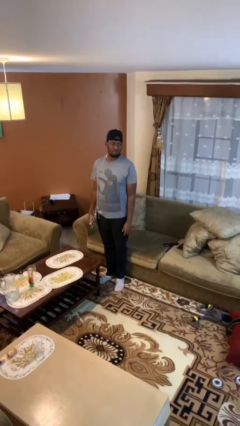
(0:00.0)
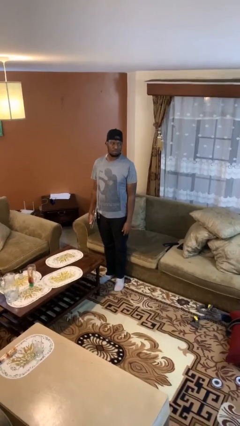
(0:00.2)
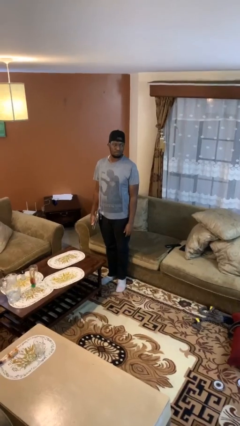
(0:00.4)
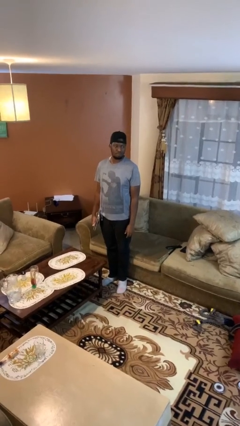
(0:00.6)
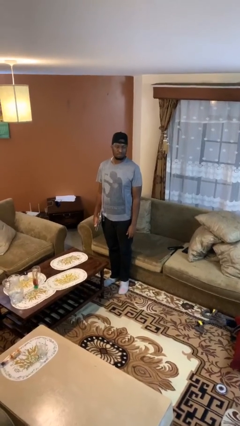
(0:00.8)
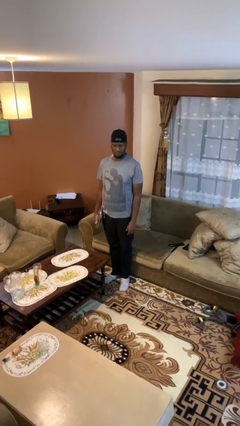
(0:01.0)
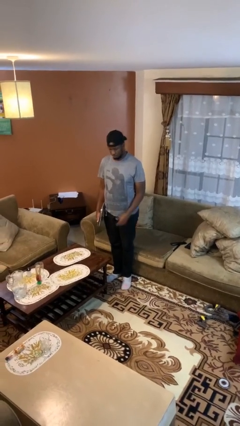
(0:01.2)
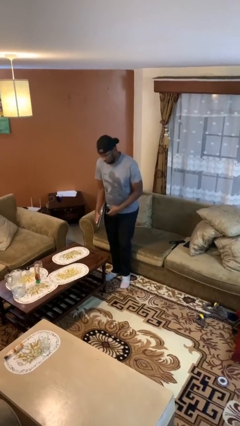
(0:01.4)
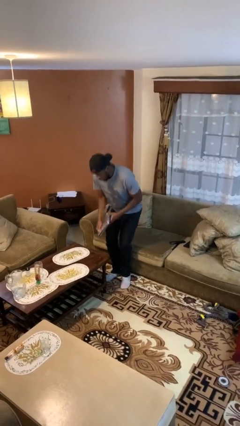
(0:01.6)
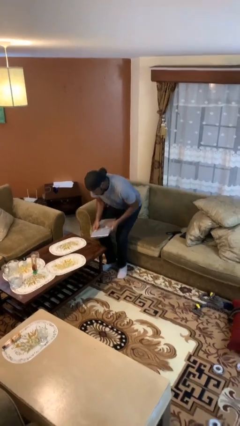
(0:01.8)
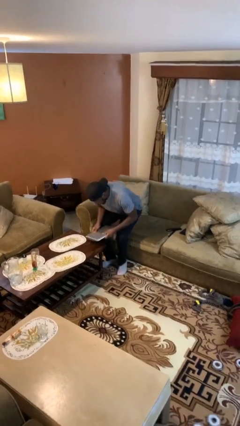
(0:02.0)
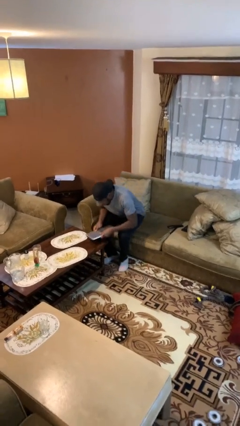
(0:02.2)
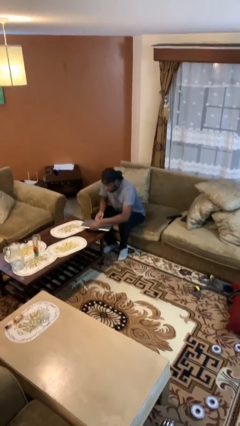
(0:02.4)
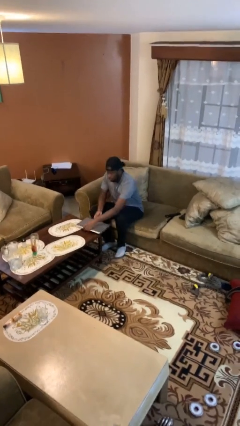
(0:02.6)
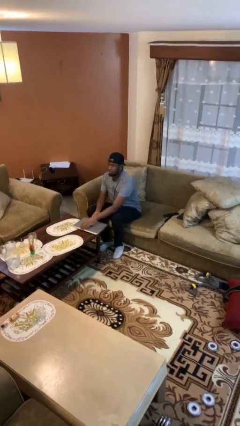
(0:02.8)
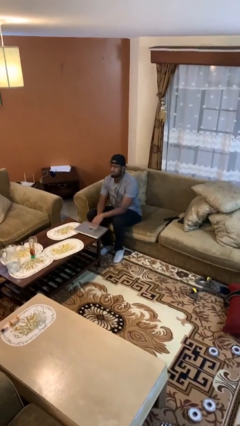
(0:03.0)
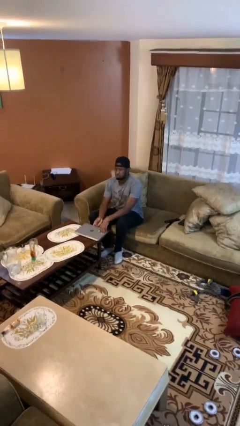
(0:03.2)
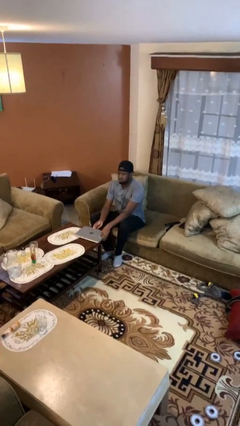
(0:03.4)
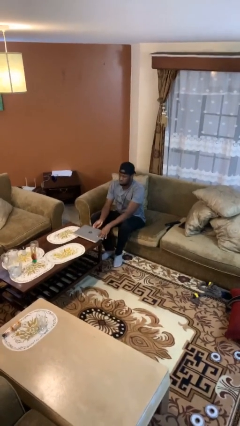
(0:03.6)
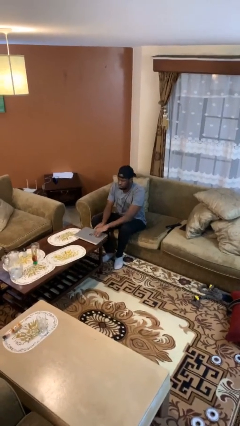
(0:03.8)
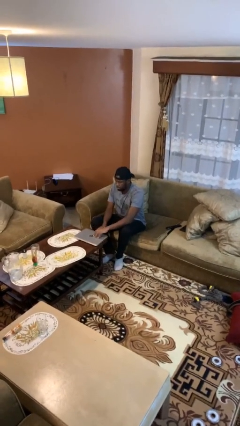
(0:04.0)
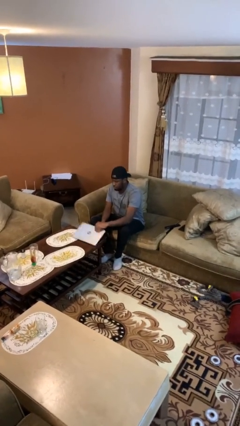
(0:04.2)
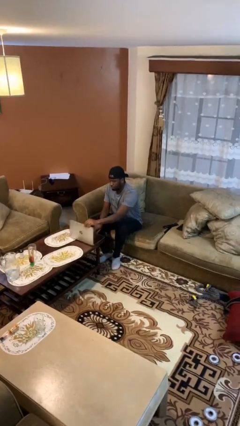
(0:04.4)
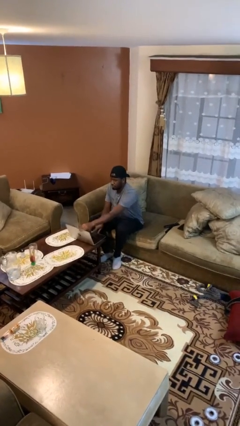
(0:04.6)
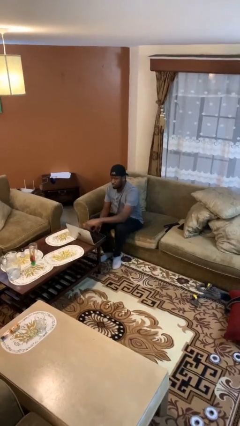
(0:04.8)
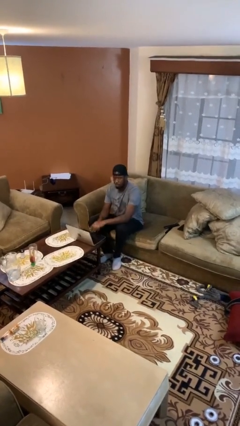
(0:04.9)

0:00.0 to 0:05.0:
person sits down

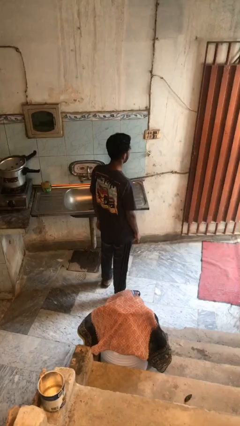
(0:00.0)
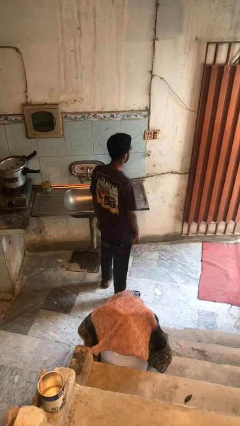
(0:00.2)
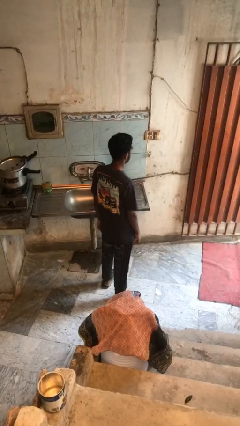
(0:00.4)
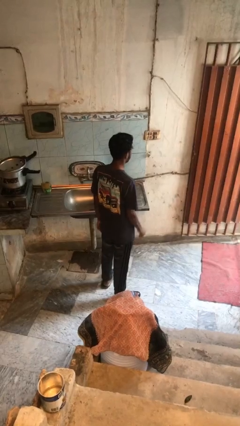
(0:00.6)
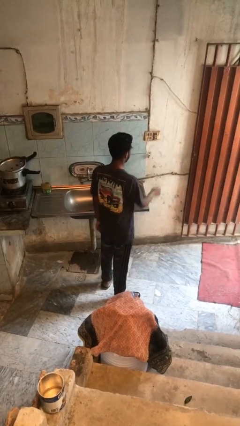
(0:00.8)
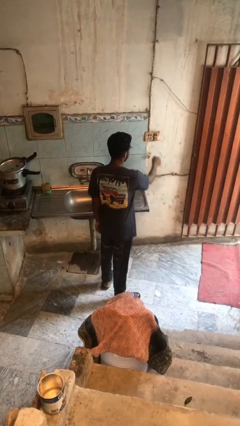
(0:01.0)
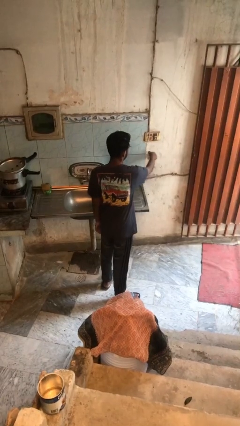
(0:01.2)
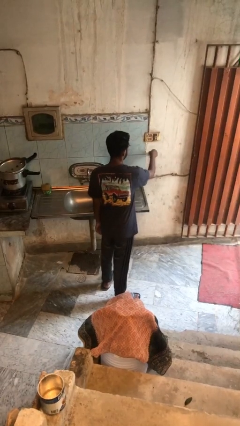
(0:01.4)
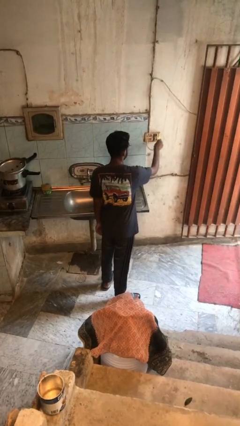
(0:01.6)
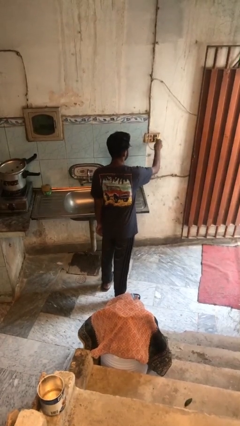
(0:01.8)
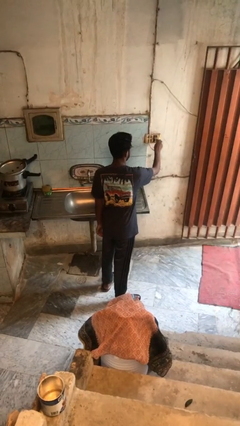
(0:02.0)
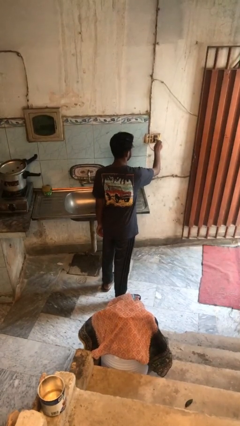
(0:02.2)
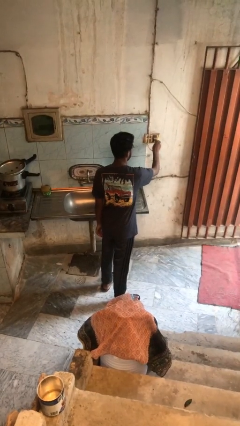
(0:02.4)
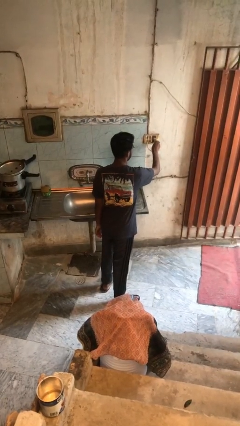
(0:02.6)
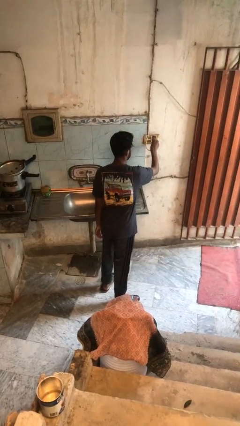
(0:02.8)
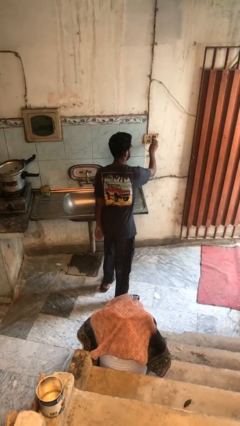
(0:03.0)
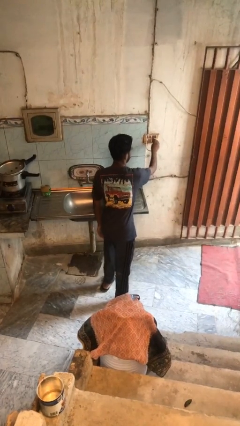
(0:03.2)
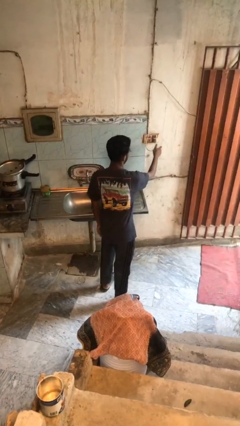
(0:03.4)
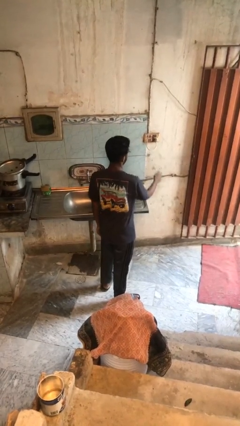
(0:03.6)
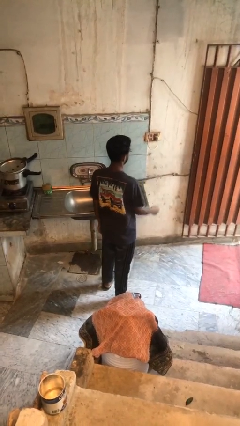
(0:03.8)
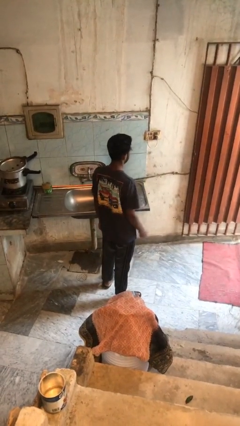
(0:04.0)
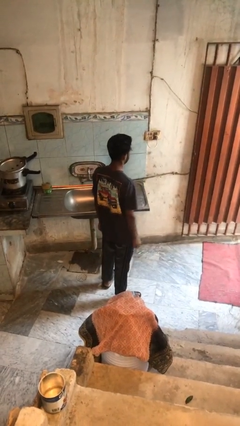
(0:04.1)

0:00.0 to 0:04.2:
person plugs into electrical socket

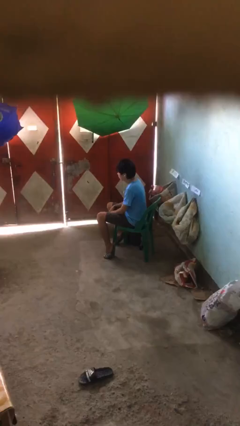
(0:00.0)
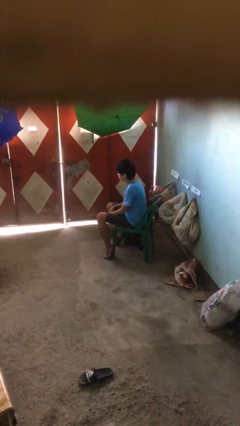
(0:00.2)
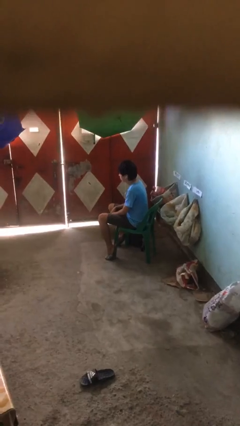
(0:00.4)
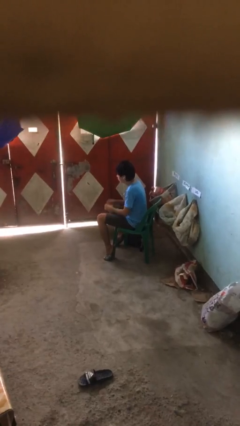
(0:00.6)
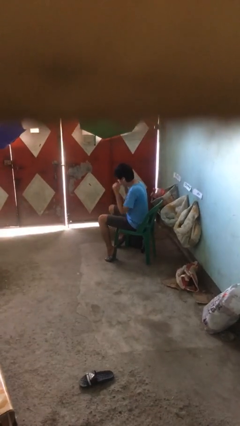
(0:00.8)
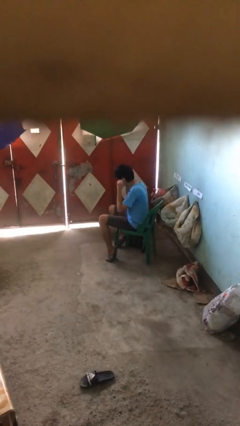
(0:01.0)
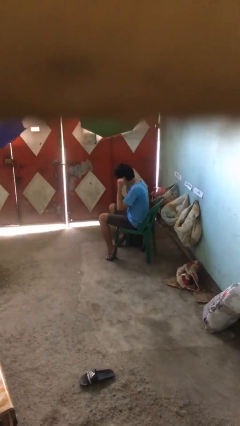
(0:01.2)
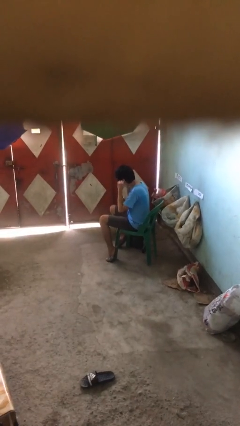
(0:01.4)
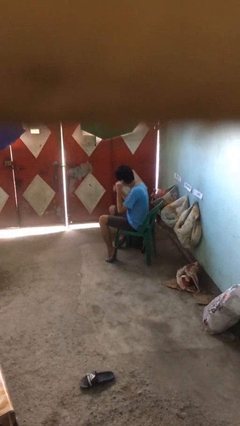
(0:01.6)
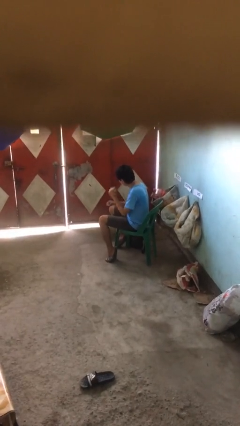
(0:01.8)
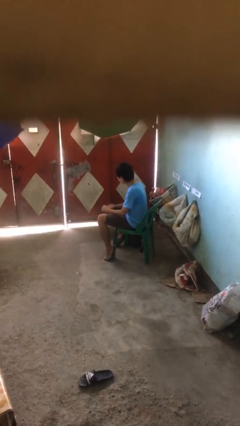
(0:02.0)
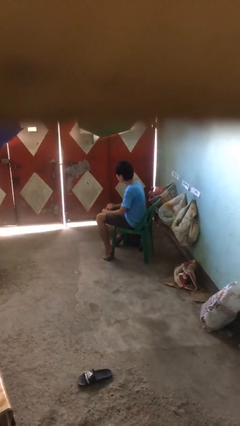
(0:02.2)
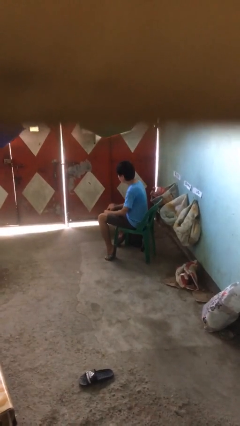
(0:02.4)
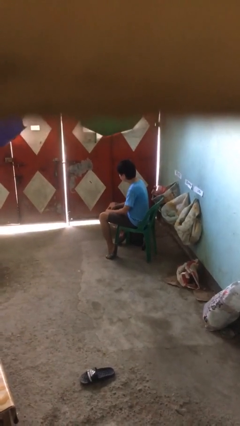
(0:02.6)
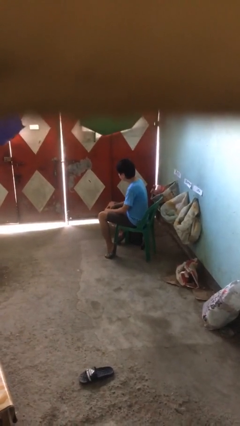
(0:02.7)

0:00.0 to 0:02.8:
person takes off headphones

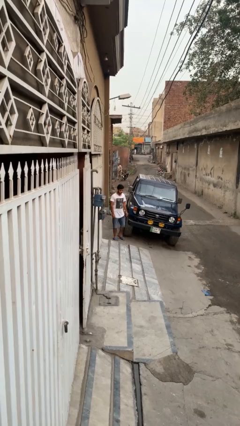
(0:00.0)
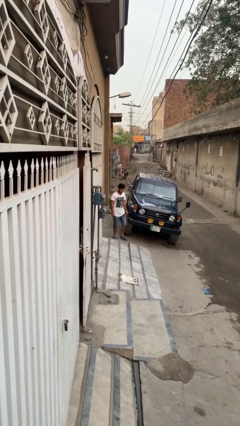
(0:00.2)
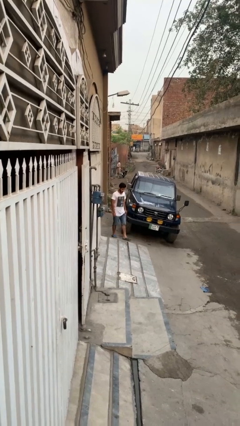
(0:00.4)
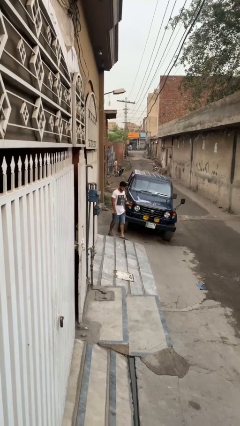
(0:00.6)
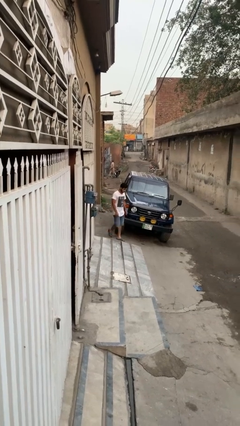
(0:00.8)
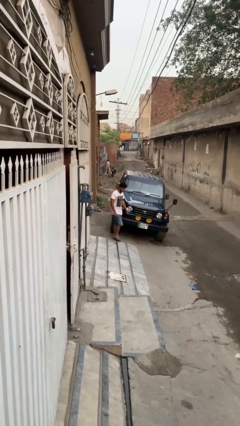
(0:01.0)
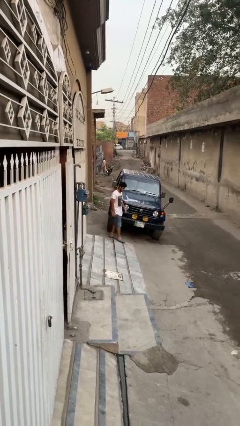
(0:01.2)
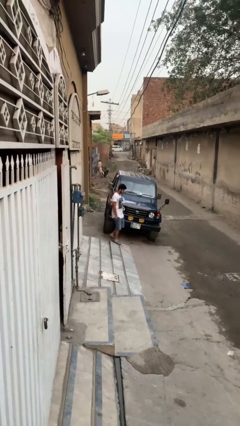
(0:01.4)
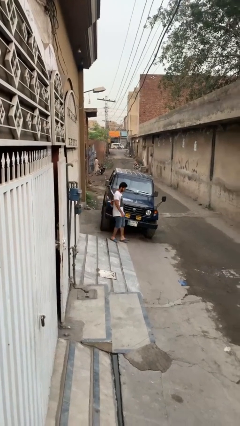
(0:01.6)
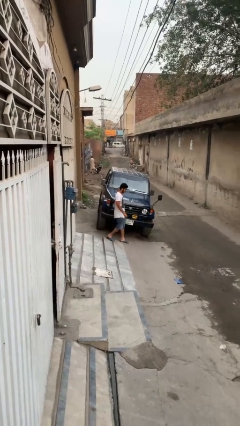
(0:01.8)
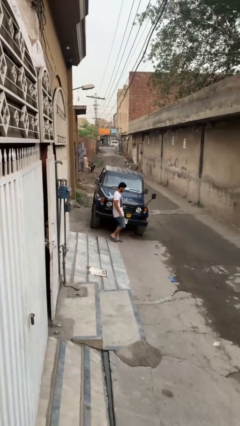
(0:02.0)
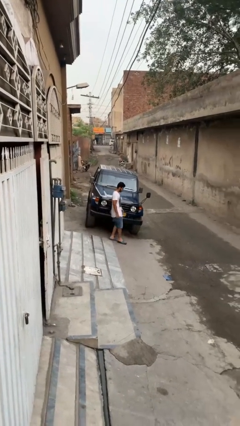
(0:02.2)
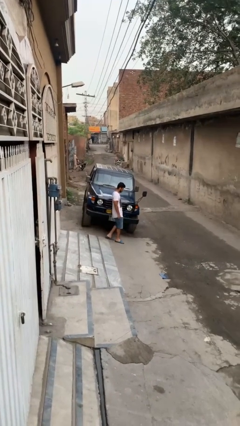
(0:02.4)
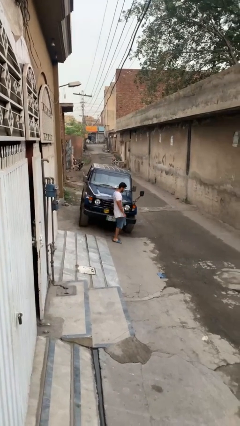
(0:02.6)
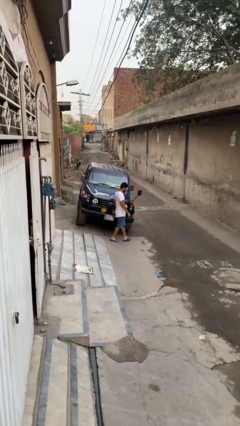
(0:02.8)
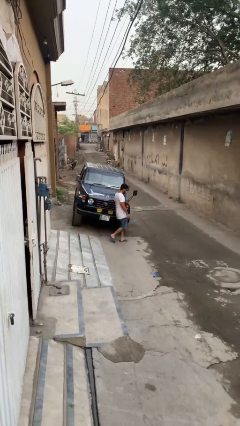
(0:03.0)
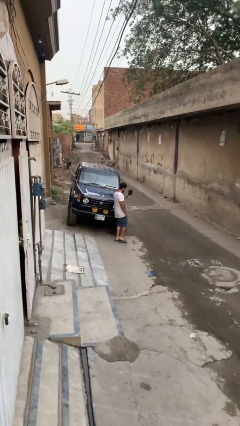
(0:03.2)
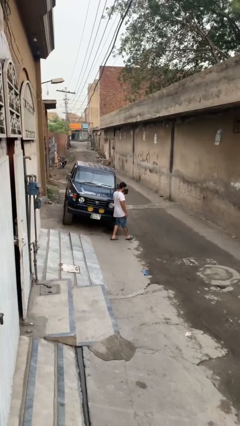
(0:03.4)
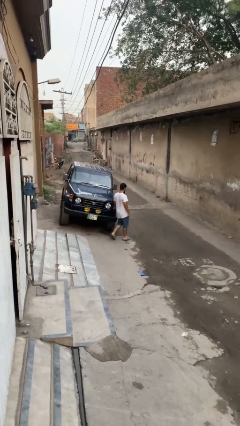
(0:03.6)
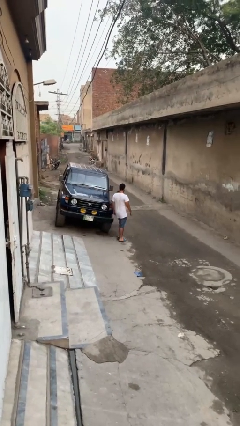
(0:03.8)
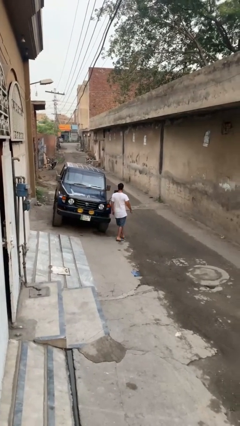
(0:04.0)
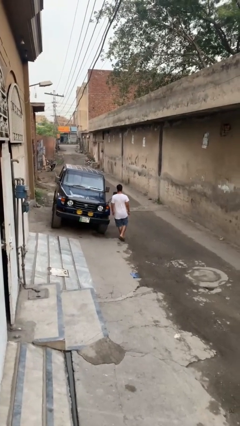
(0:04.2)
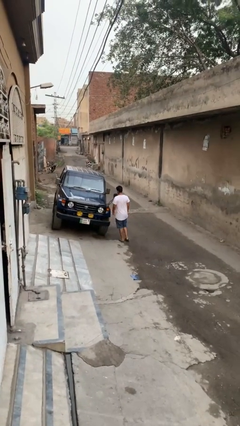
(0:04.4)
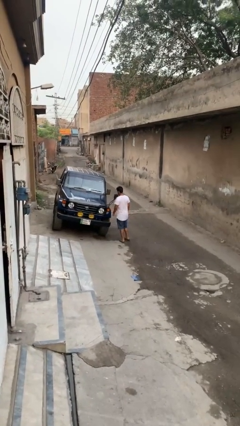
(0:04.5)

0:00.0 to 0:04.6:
person walks around car

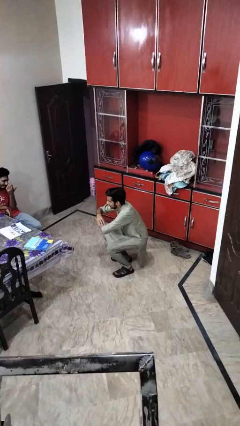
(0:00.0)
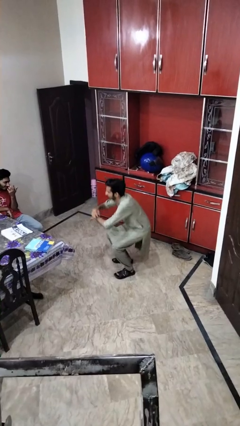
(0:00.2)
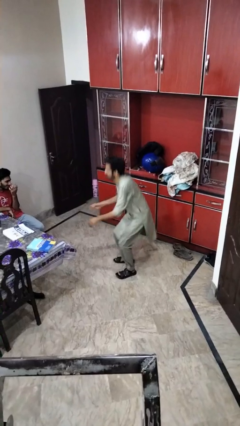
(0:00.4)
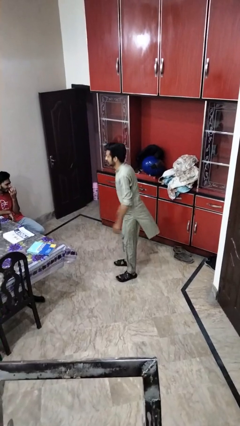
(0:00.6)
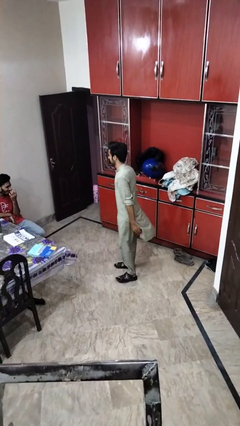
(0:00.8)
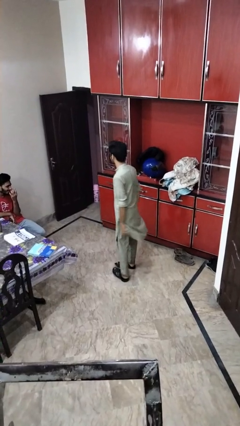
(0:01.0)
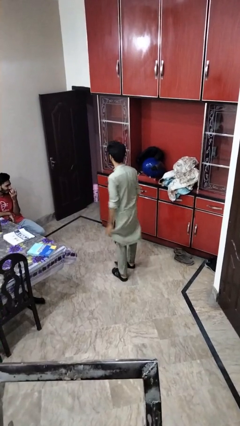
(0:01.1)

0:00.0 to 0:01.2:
person stands up
